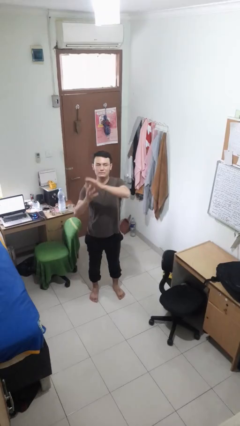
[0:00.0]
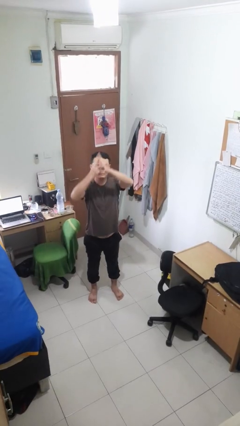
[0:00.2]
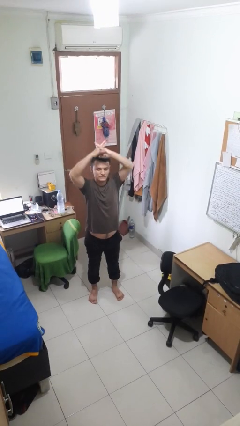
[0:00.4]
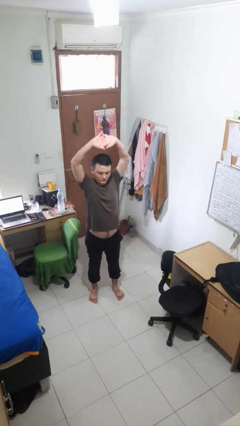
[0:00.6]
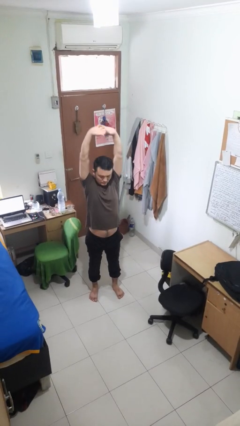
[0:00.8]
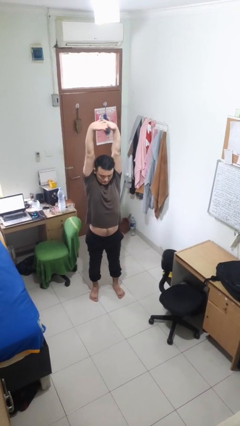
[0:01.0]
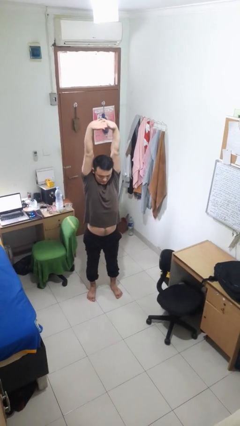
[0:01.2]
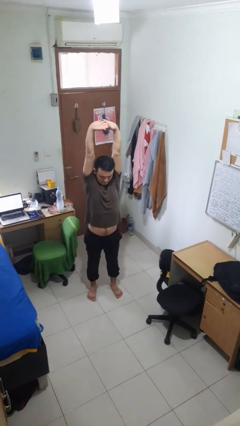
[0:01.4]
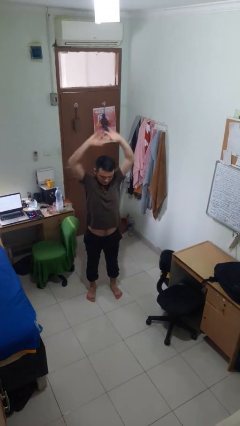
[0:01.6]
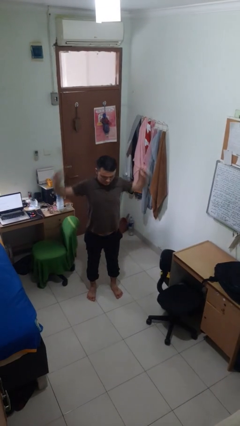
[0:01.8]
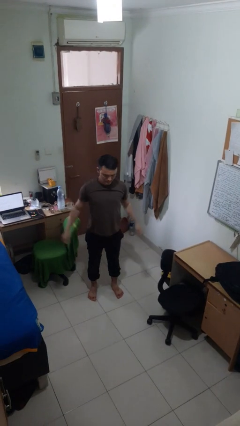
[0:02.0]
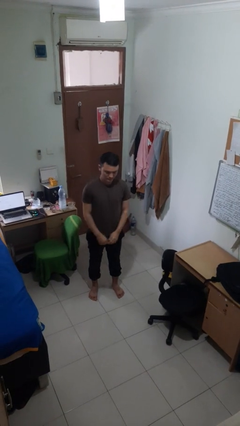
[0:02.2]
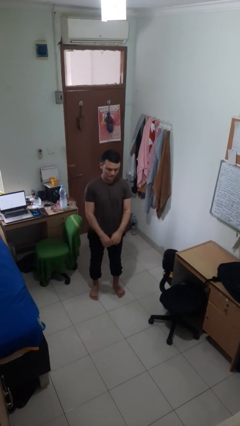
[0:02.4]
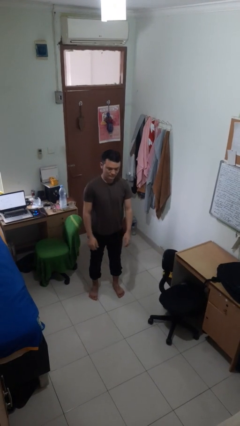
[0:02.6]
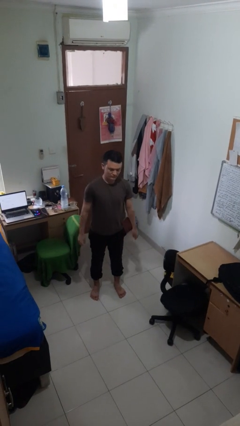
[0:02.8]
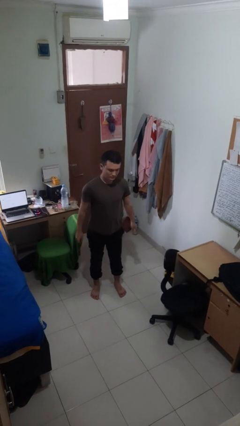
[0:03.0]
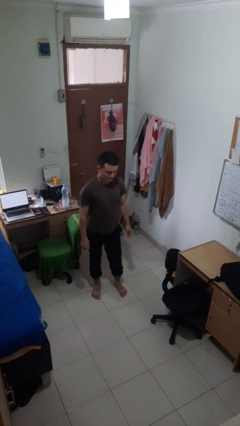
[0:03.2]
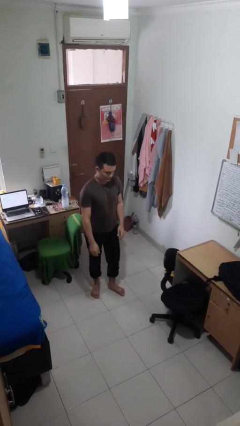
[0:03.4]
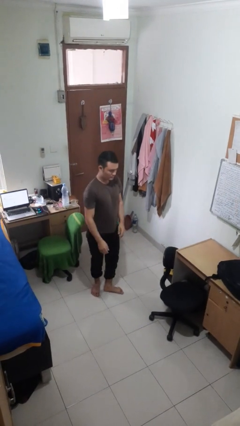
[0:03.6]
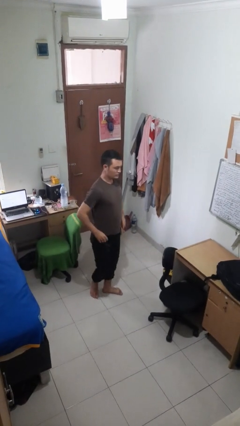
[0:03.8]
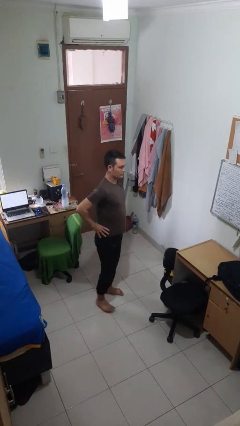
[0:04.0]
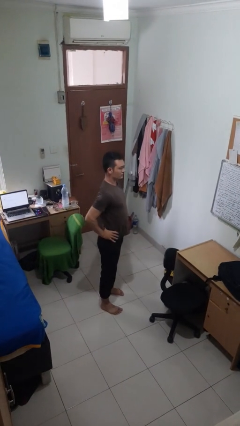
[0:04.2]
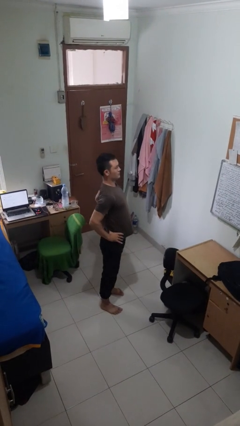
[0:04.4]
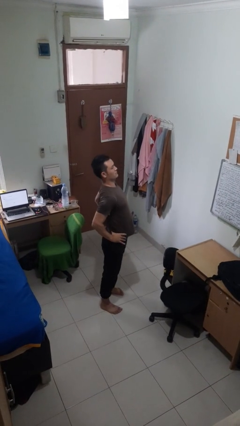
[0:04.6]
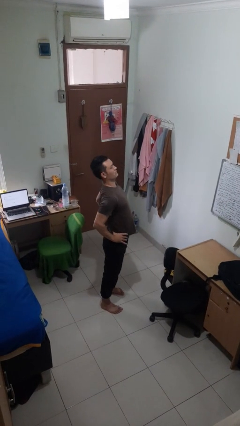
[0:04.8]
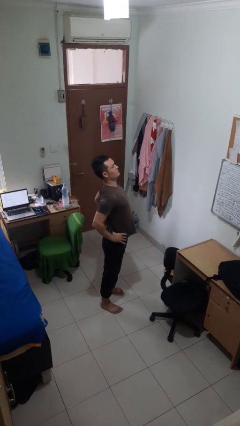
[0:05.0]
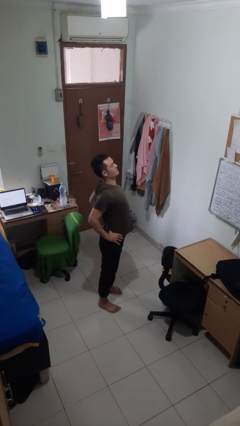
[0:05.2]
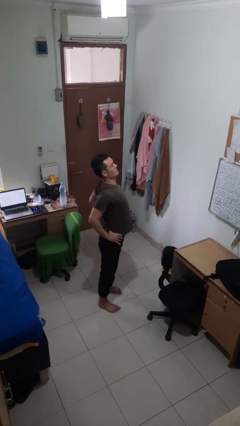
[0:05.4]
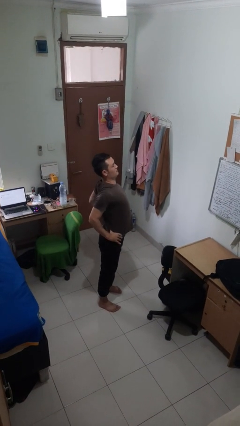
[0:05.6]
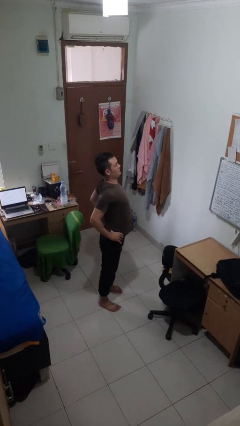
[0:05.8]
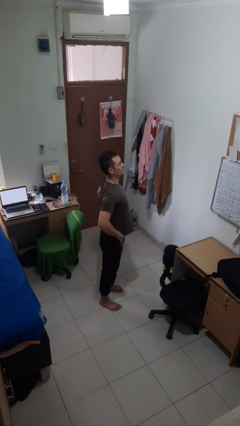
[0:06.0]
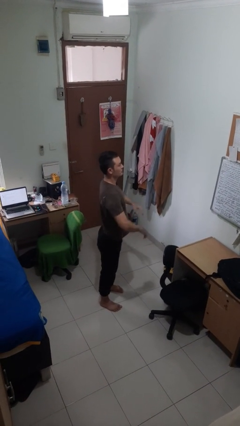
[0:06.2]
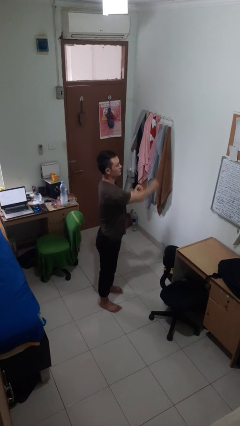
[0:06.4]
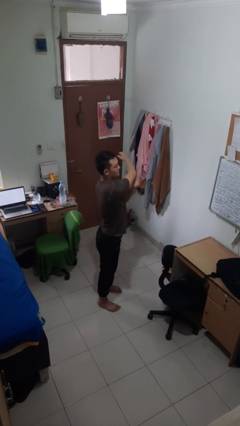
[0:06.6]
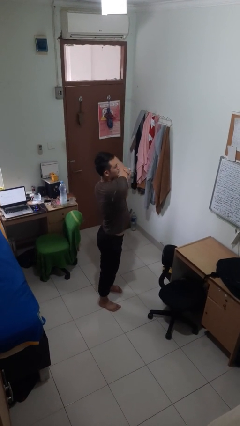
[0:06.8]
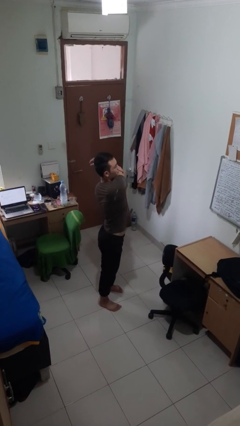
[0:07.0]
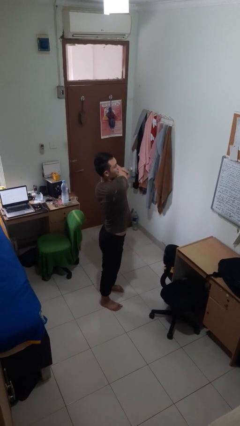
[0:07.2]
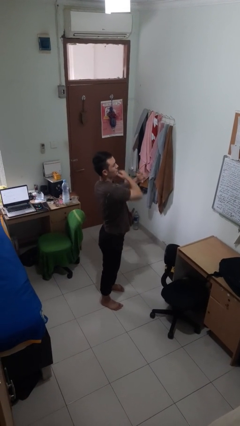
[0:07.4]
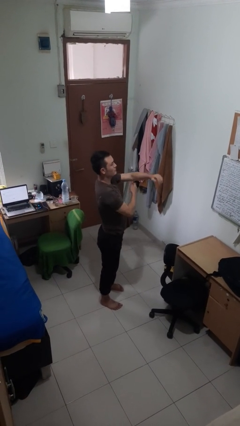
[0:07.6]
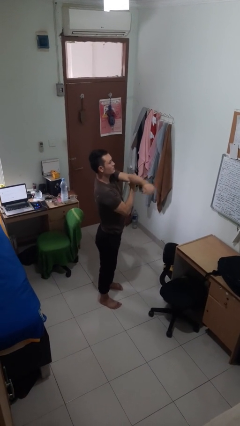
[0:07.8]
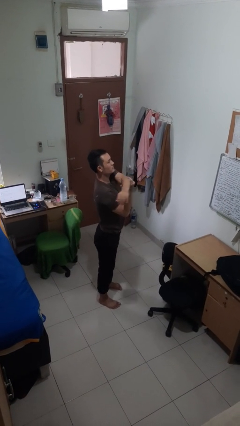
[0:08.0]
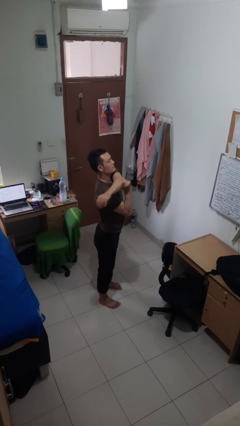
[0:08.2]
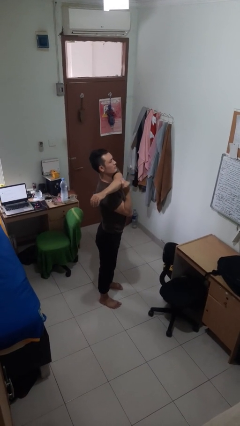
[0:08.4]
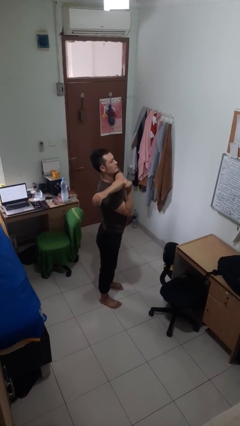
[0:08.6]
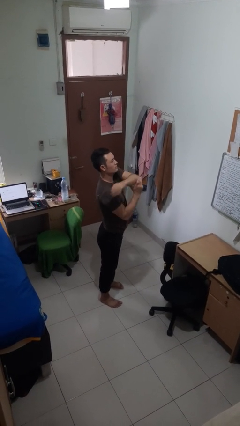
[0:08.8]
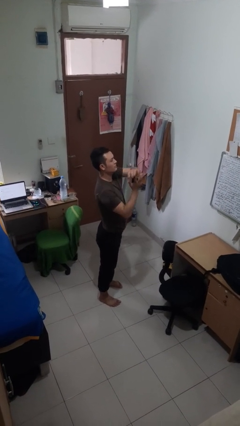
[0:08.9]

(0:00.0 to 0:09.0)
person stretches arms over head

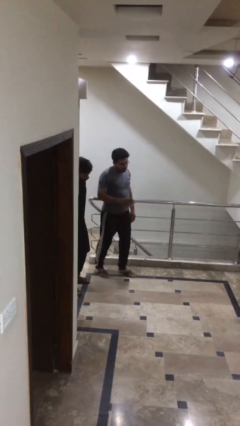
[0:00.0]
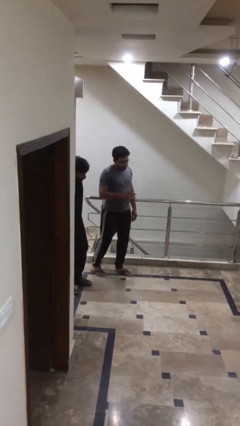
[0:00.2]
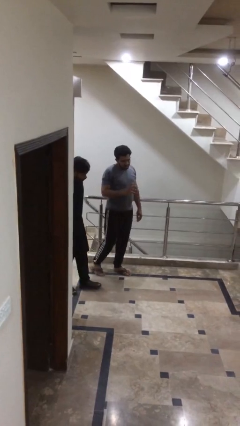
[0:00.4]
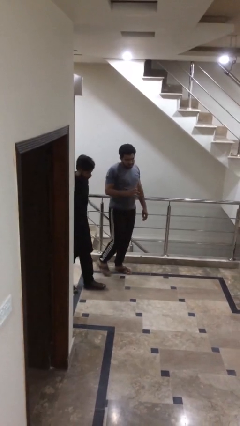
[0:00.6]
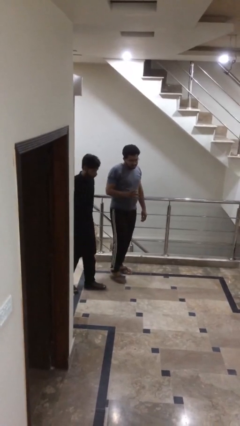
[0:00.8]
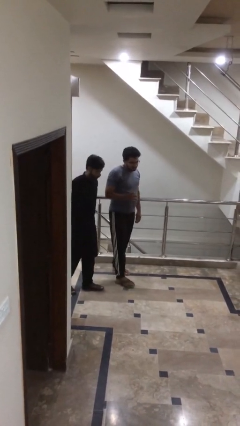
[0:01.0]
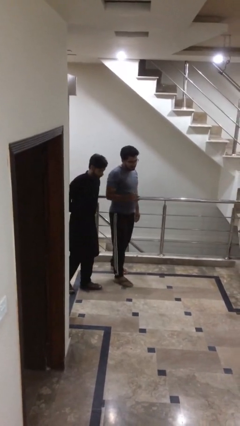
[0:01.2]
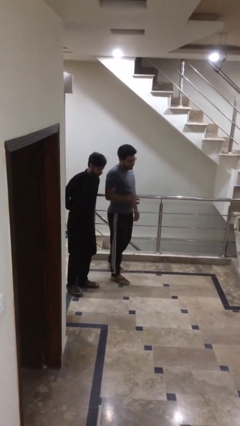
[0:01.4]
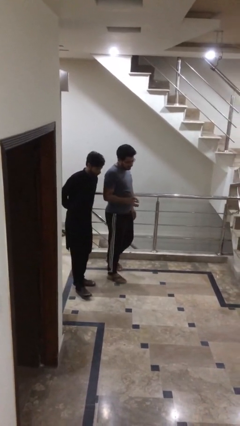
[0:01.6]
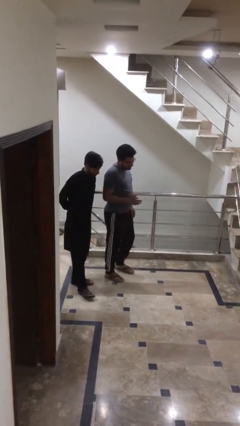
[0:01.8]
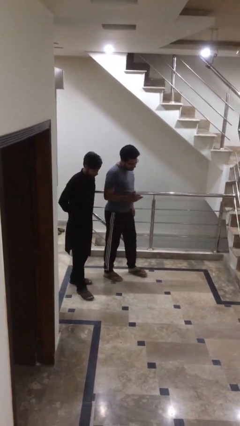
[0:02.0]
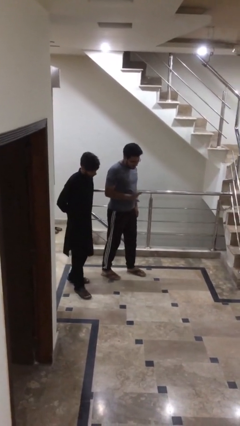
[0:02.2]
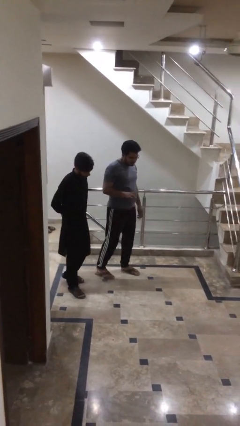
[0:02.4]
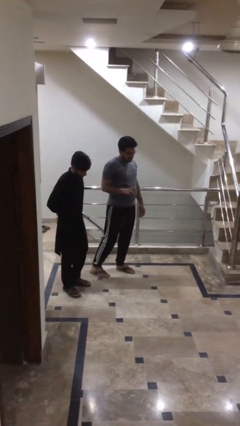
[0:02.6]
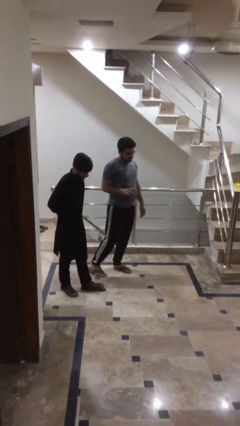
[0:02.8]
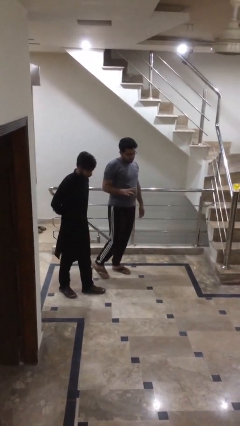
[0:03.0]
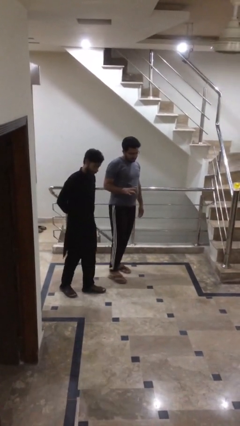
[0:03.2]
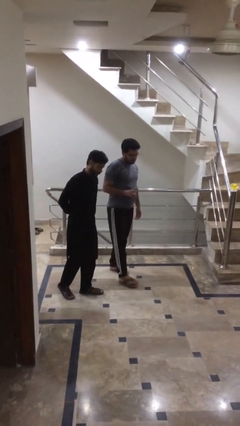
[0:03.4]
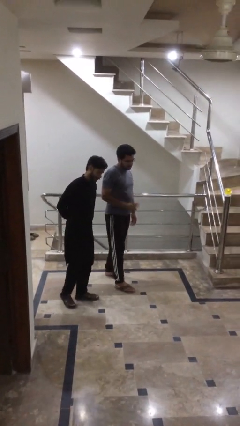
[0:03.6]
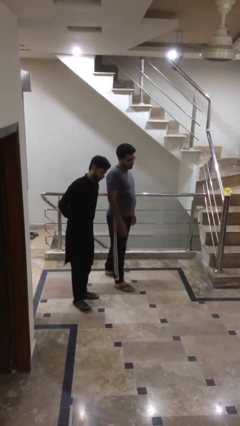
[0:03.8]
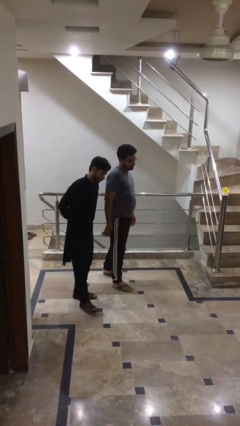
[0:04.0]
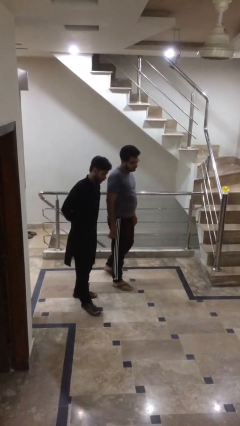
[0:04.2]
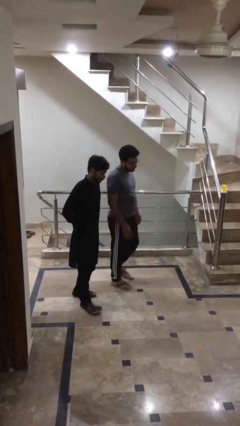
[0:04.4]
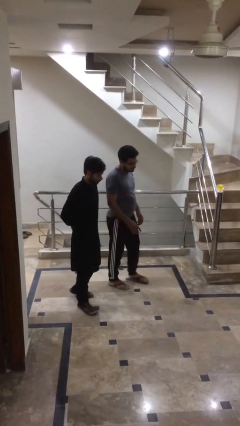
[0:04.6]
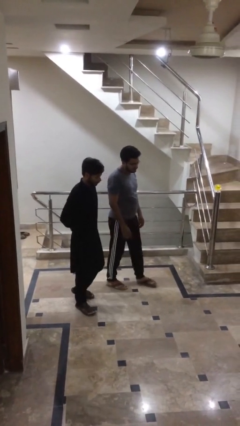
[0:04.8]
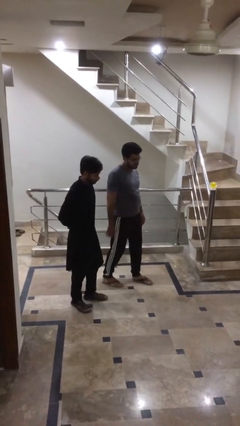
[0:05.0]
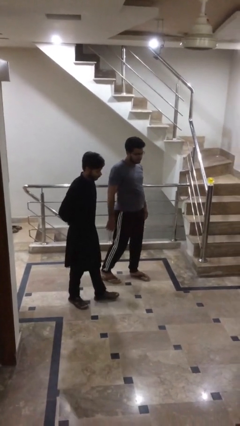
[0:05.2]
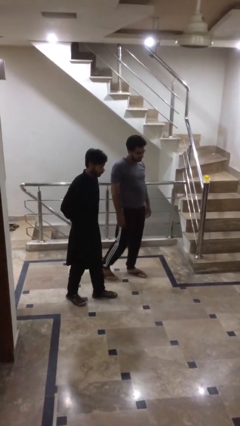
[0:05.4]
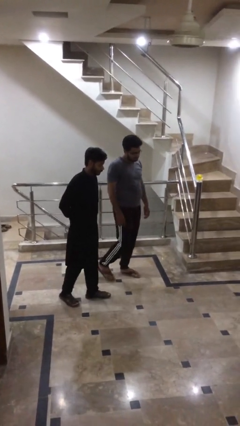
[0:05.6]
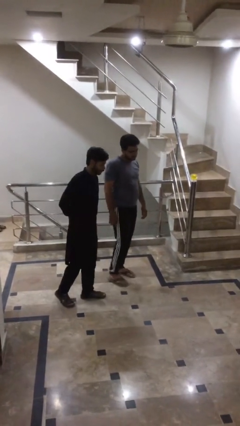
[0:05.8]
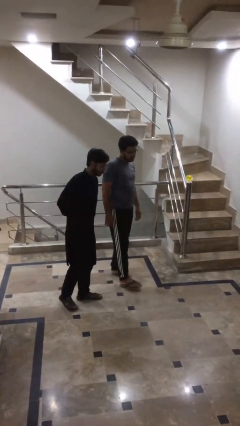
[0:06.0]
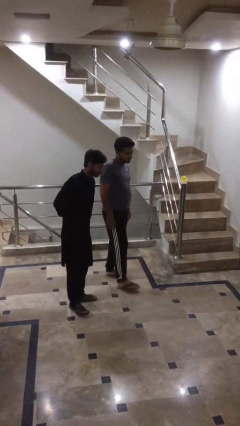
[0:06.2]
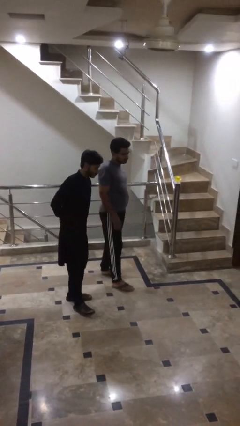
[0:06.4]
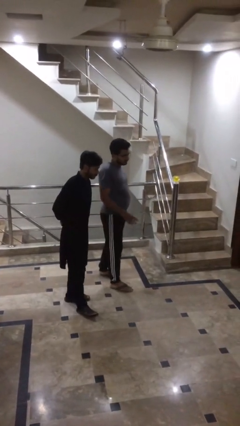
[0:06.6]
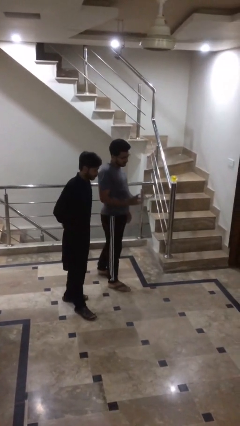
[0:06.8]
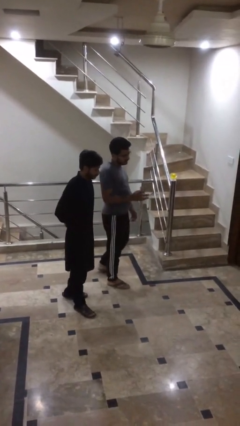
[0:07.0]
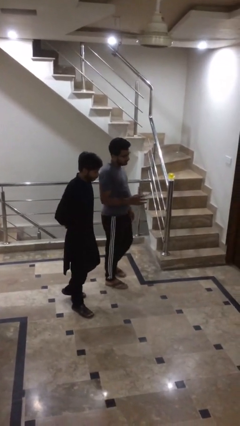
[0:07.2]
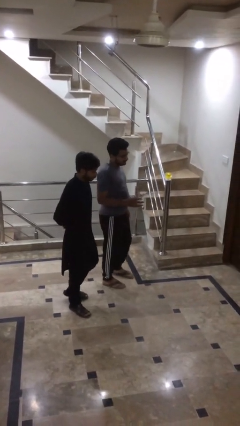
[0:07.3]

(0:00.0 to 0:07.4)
person talks to person

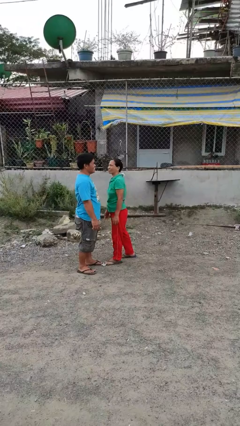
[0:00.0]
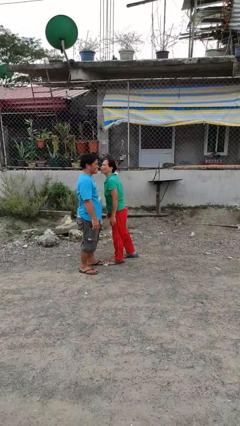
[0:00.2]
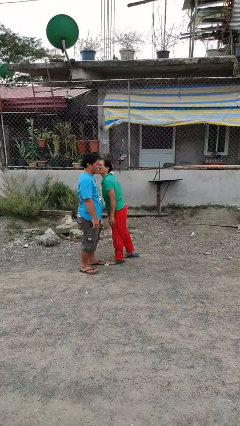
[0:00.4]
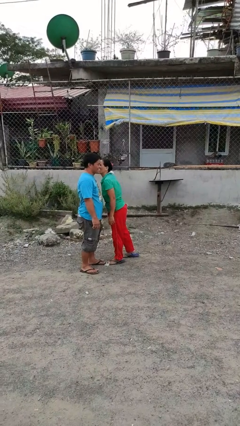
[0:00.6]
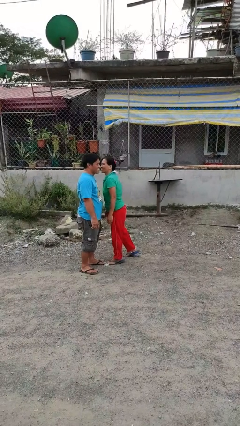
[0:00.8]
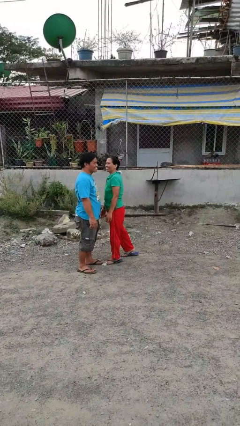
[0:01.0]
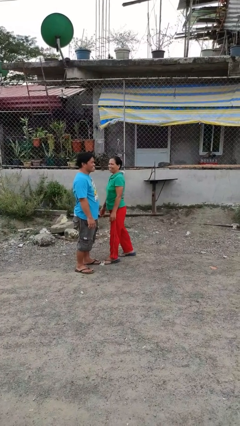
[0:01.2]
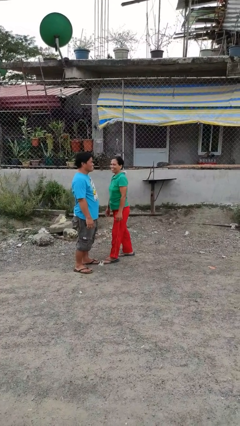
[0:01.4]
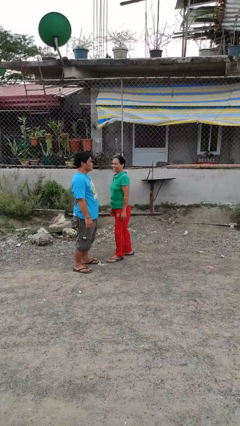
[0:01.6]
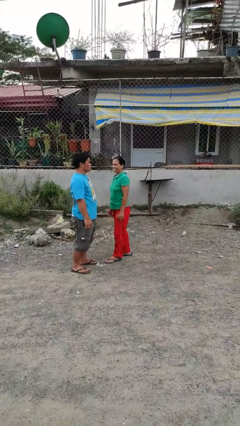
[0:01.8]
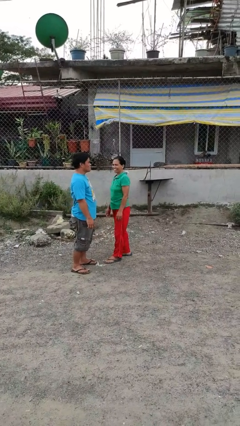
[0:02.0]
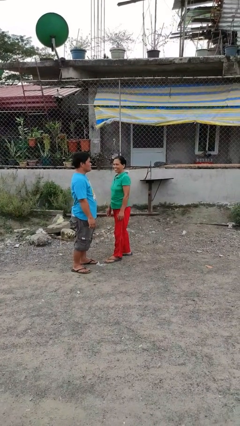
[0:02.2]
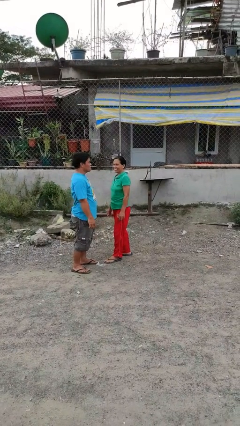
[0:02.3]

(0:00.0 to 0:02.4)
person kisses cheek of person
